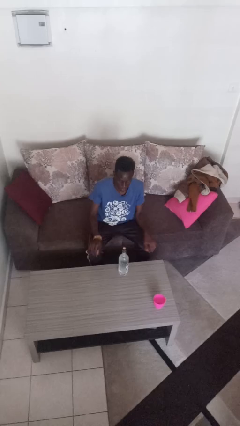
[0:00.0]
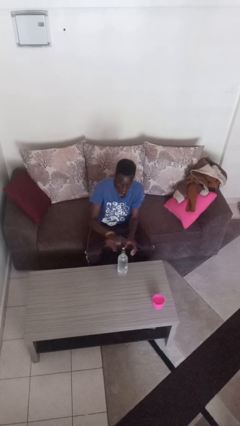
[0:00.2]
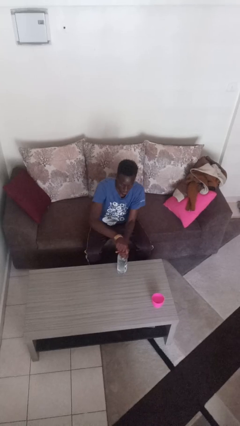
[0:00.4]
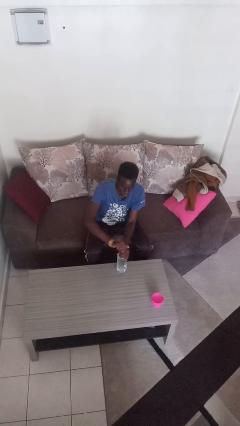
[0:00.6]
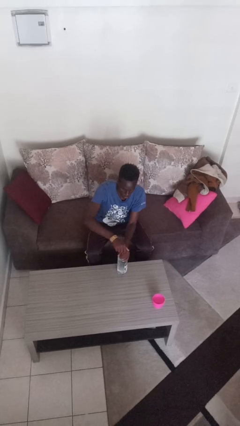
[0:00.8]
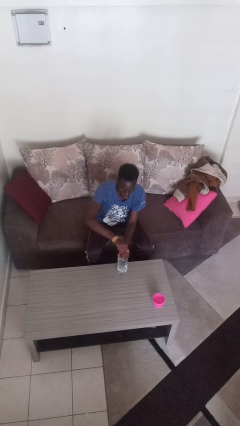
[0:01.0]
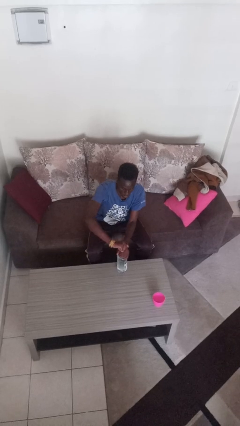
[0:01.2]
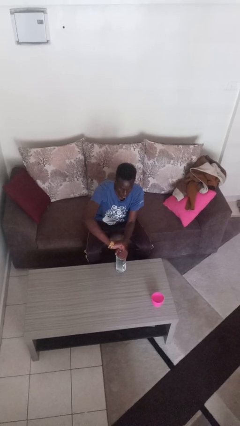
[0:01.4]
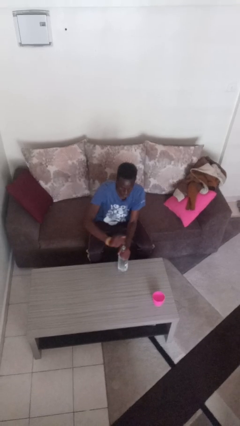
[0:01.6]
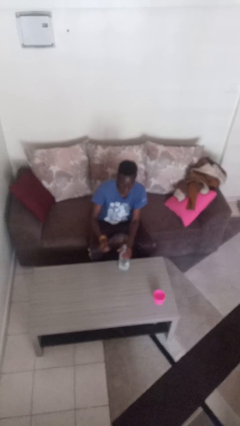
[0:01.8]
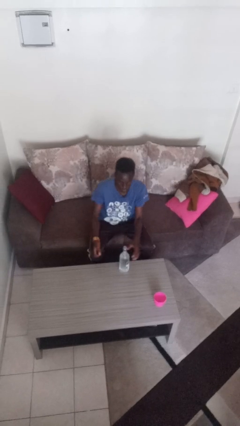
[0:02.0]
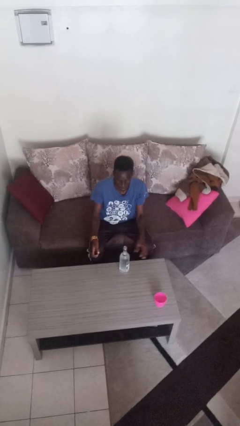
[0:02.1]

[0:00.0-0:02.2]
person unscrews lid from bottle

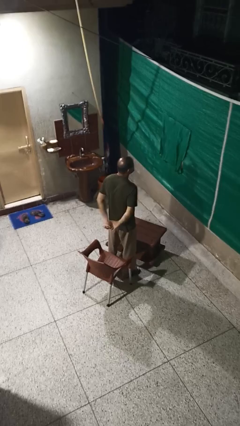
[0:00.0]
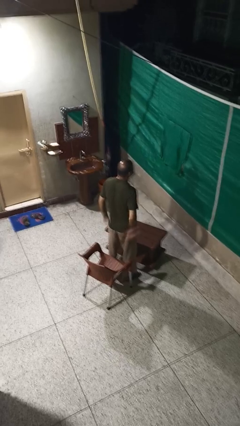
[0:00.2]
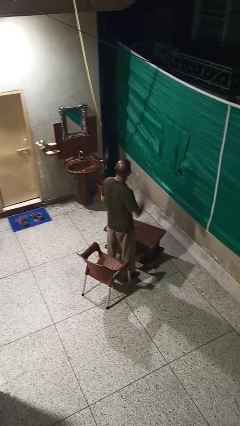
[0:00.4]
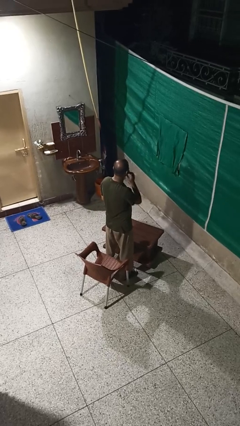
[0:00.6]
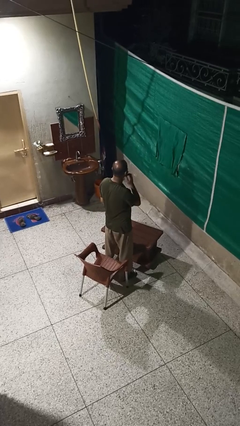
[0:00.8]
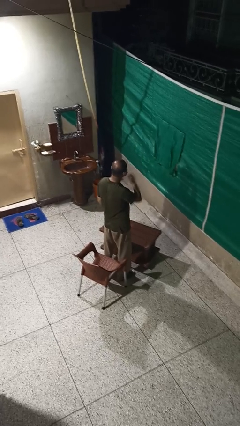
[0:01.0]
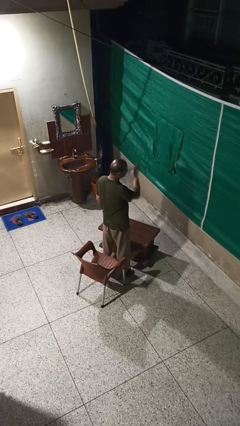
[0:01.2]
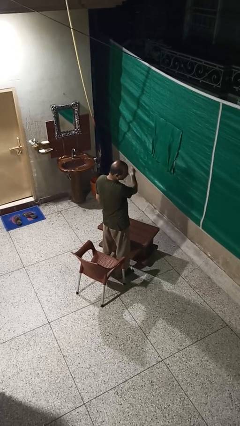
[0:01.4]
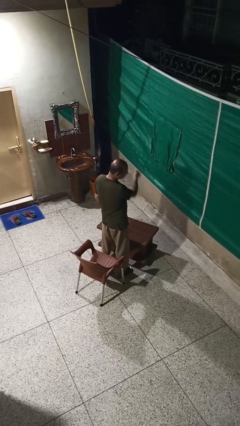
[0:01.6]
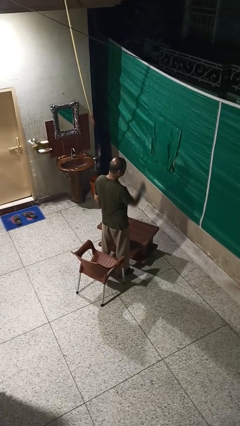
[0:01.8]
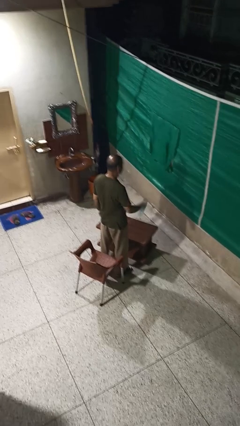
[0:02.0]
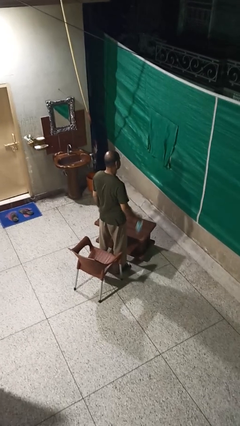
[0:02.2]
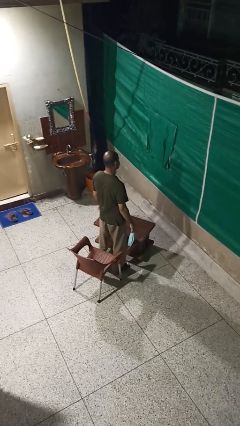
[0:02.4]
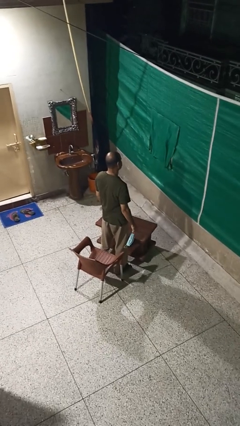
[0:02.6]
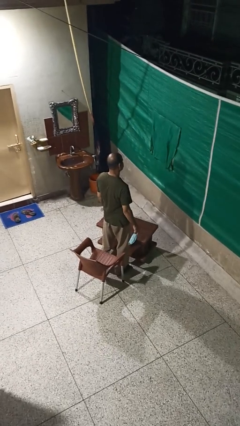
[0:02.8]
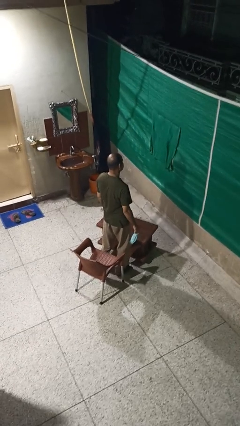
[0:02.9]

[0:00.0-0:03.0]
person takes off facemask

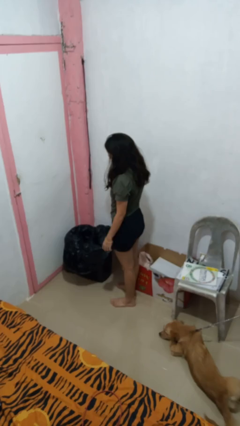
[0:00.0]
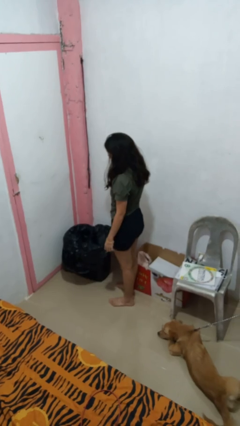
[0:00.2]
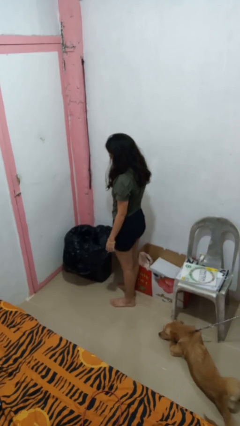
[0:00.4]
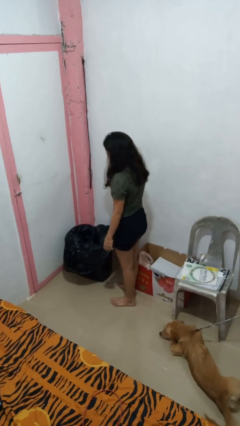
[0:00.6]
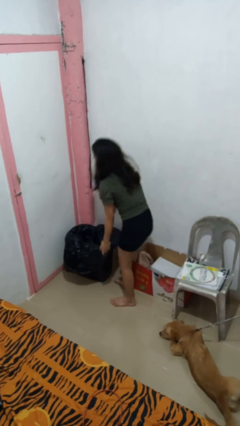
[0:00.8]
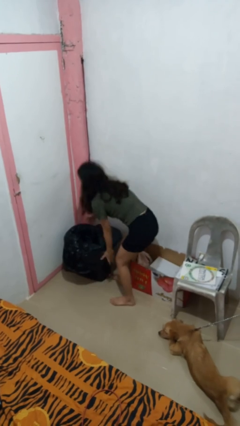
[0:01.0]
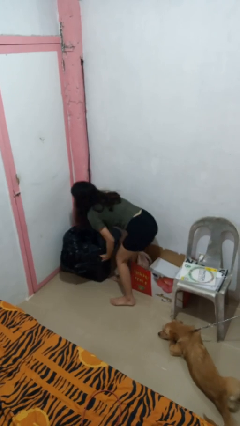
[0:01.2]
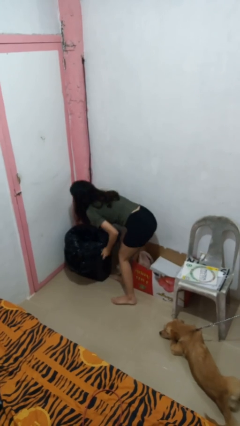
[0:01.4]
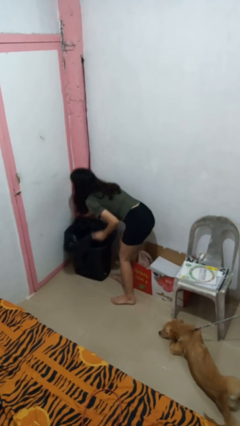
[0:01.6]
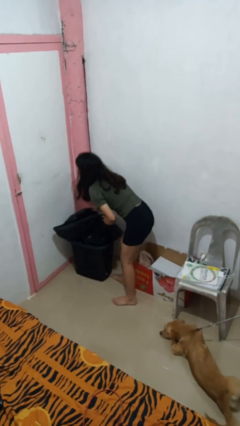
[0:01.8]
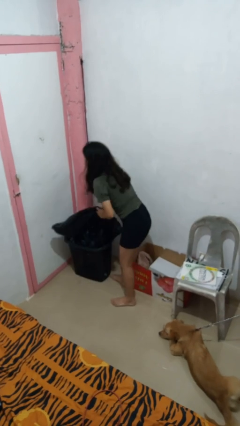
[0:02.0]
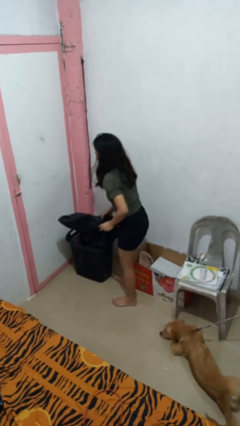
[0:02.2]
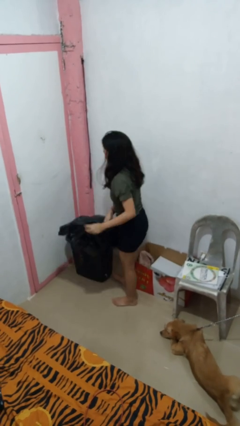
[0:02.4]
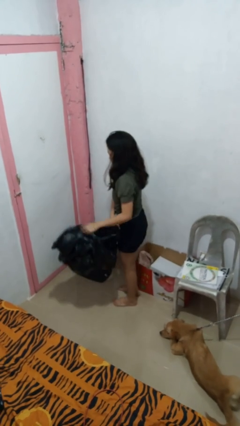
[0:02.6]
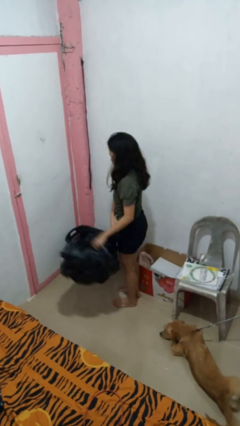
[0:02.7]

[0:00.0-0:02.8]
person removes trashbag from trashcan

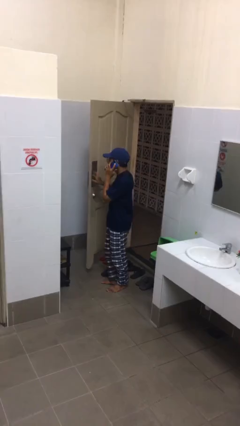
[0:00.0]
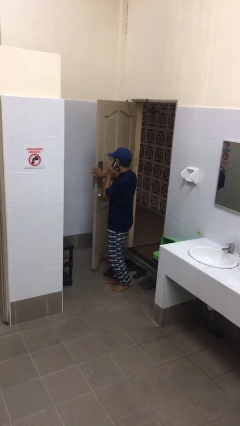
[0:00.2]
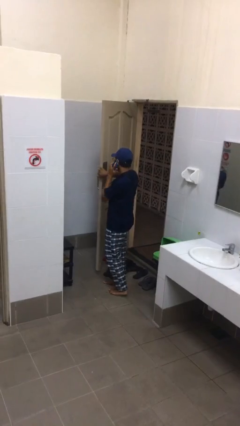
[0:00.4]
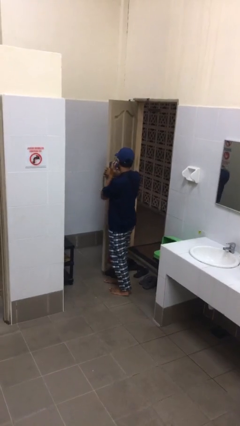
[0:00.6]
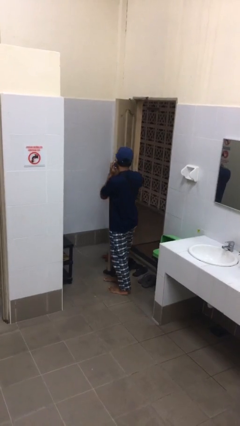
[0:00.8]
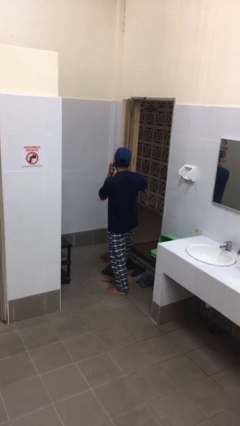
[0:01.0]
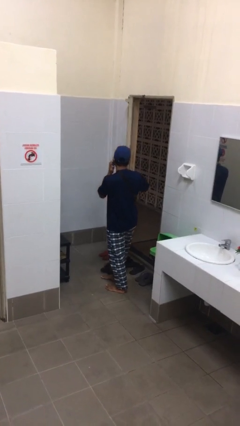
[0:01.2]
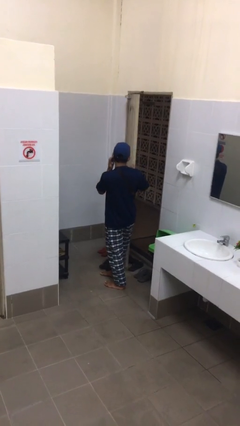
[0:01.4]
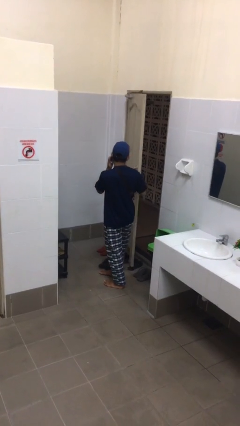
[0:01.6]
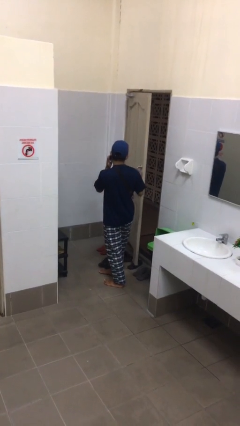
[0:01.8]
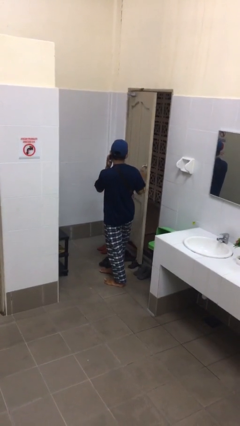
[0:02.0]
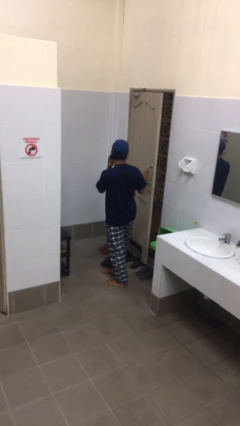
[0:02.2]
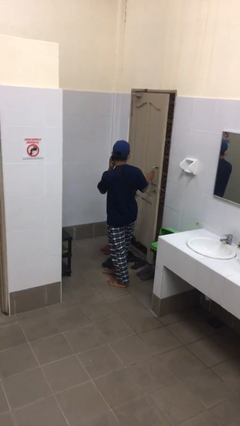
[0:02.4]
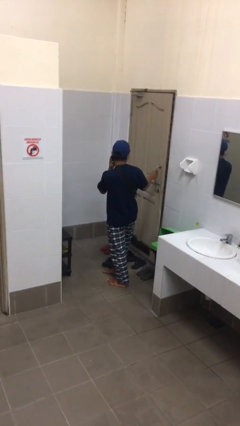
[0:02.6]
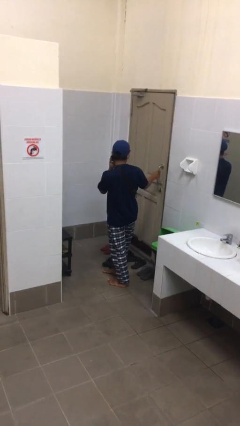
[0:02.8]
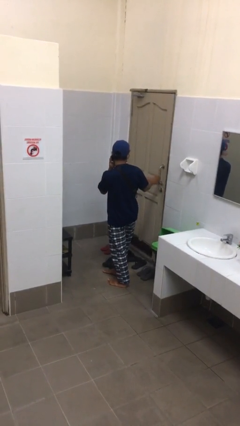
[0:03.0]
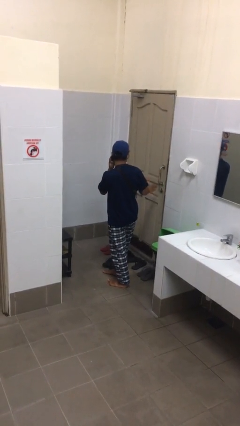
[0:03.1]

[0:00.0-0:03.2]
person closes facility door

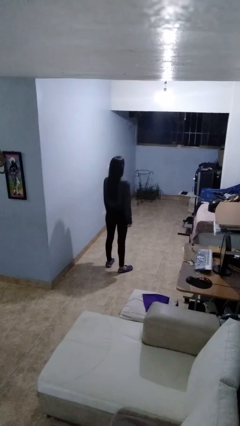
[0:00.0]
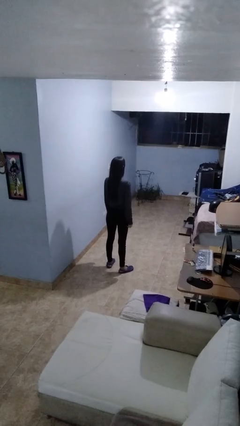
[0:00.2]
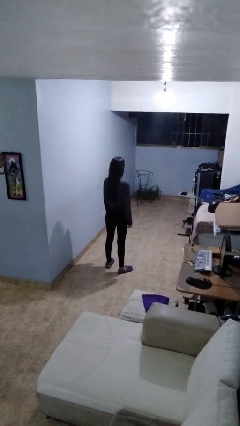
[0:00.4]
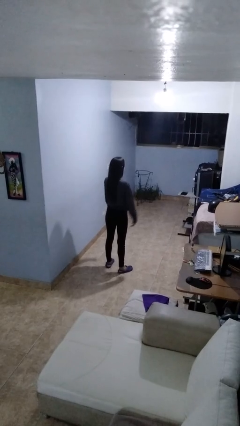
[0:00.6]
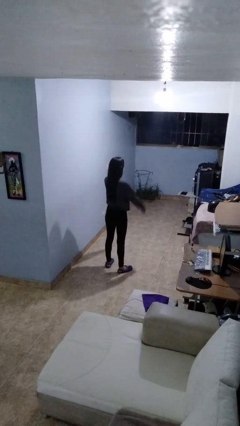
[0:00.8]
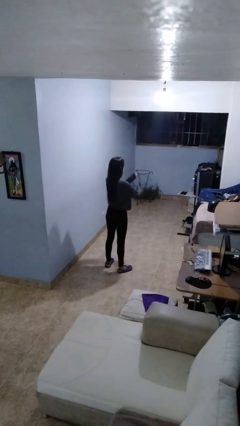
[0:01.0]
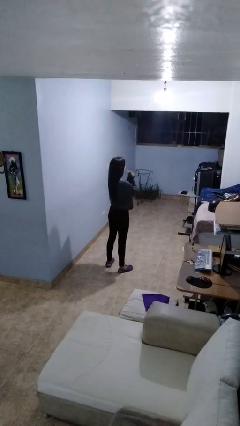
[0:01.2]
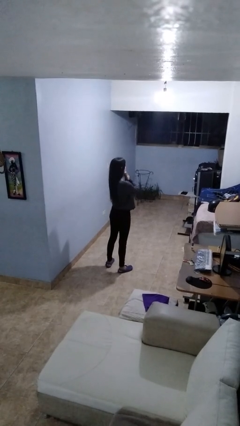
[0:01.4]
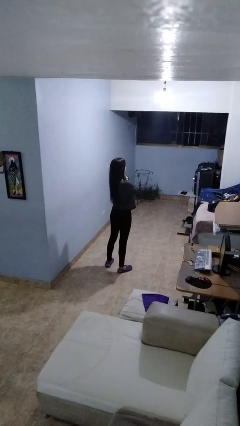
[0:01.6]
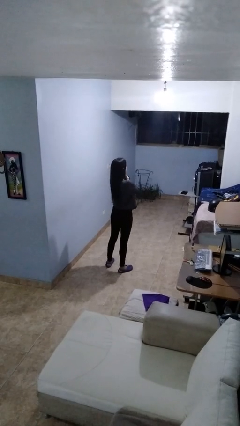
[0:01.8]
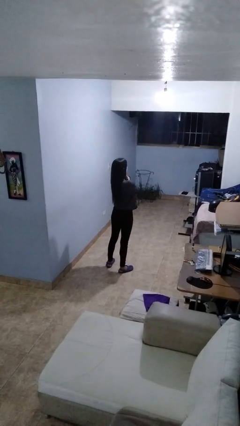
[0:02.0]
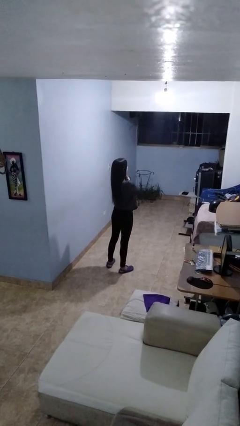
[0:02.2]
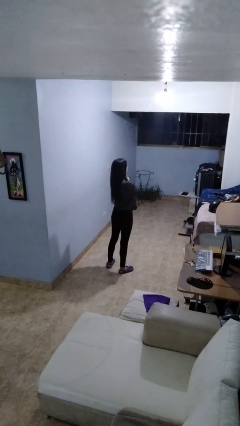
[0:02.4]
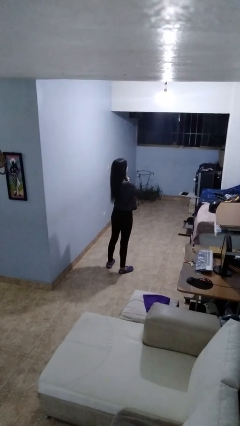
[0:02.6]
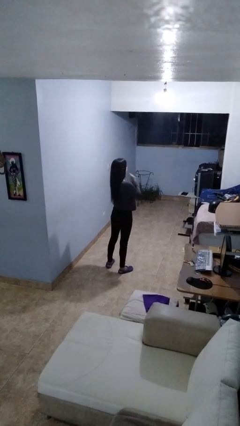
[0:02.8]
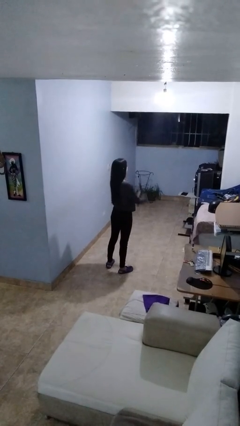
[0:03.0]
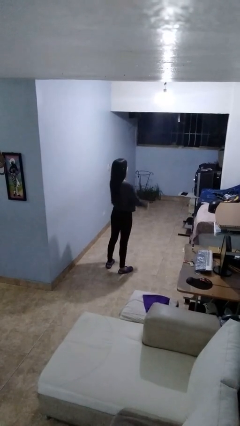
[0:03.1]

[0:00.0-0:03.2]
person gestures arms x

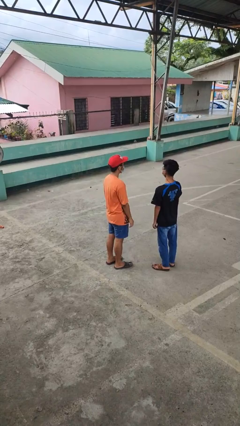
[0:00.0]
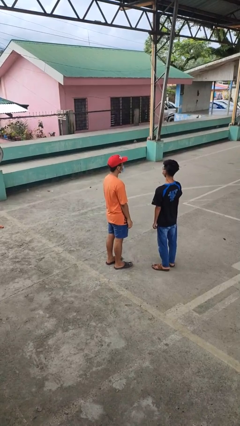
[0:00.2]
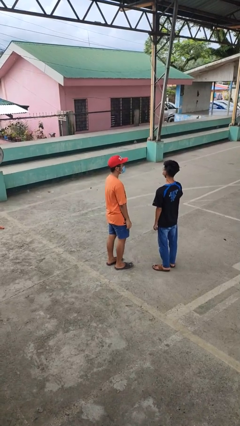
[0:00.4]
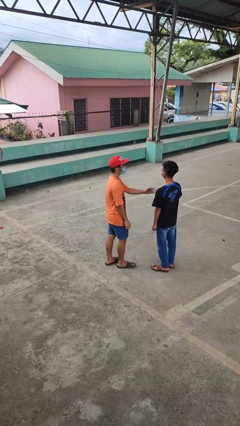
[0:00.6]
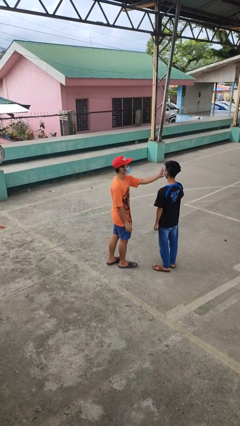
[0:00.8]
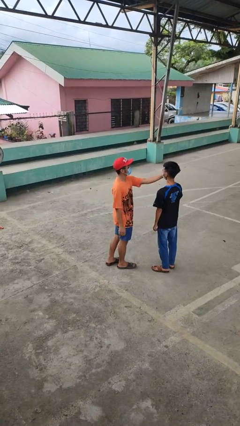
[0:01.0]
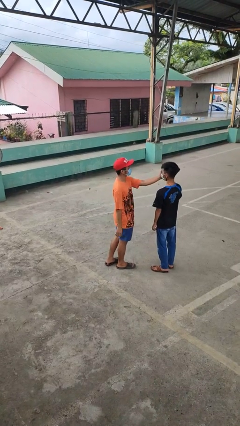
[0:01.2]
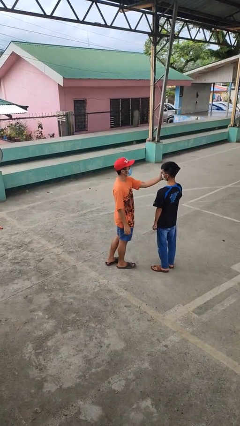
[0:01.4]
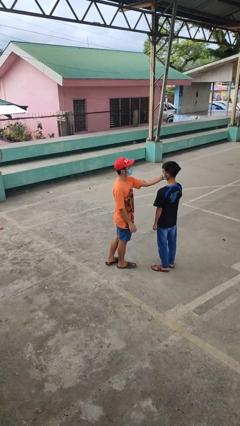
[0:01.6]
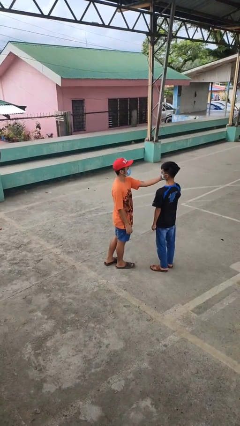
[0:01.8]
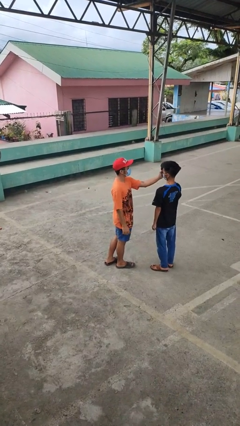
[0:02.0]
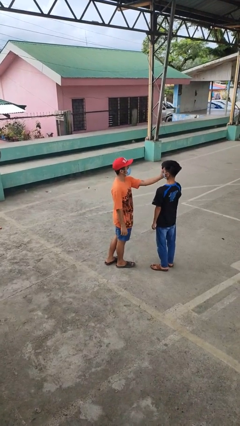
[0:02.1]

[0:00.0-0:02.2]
person touches face of person

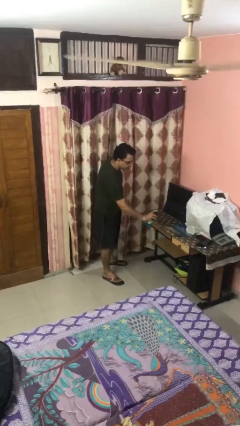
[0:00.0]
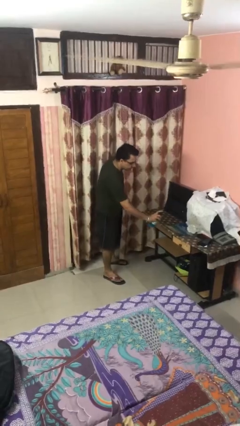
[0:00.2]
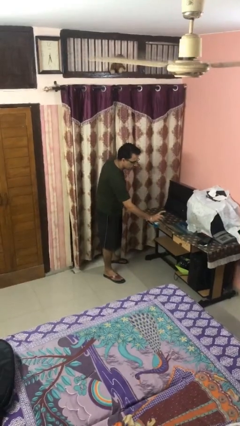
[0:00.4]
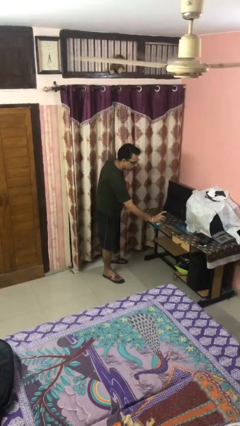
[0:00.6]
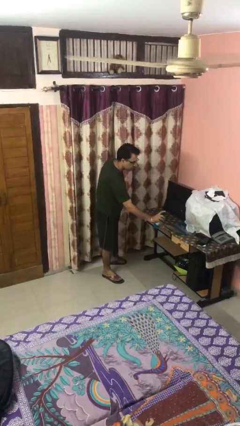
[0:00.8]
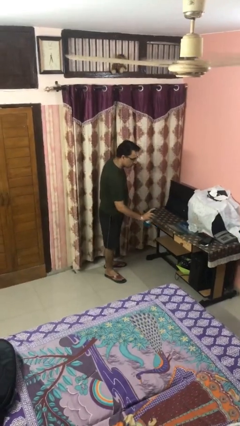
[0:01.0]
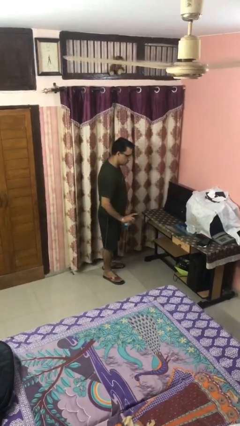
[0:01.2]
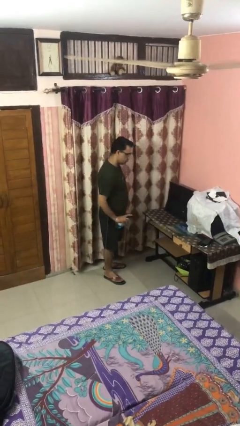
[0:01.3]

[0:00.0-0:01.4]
person sprays from bottle
